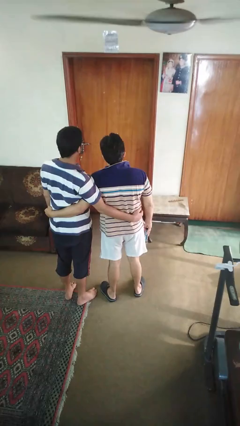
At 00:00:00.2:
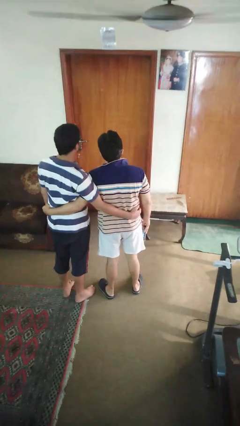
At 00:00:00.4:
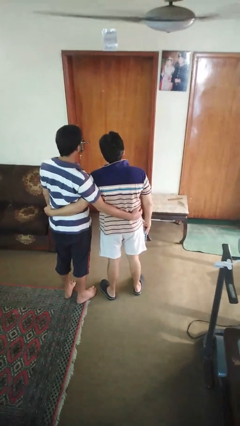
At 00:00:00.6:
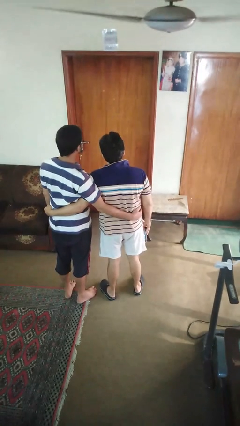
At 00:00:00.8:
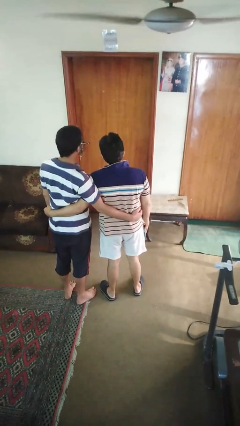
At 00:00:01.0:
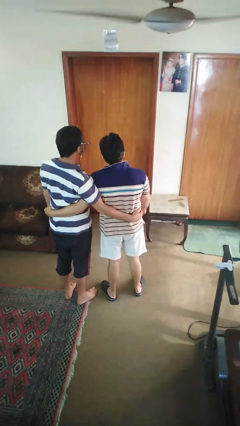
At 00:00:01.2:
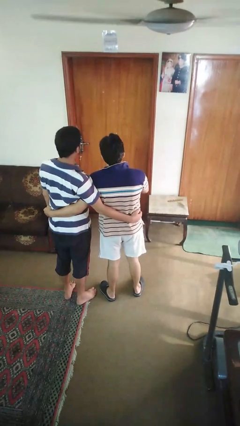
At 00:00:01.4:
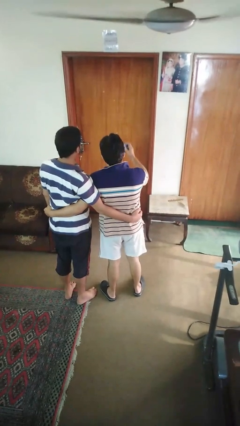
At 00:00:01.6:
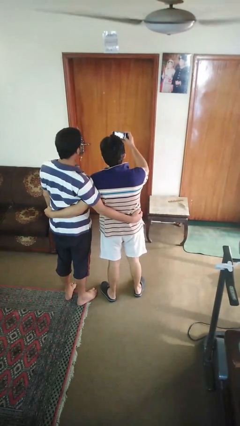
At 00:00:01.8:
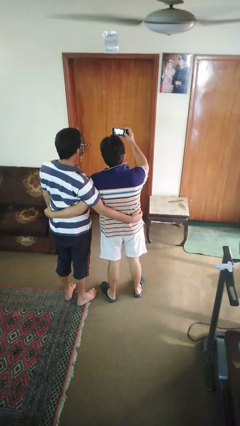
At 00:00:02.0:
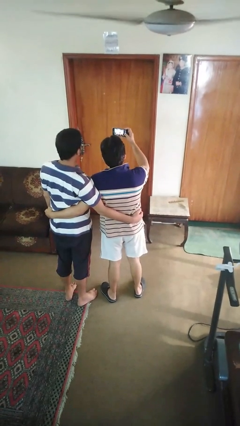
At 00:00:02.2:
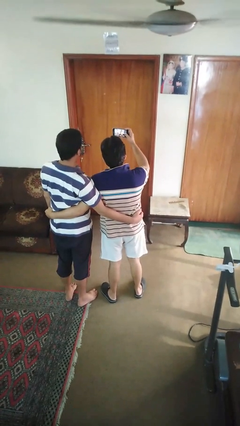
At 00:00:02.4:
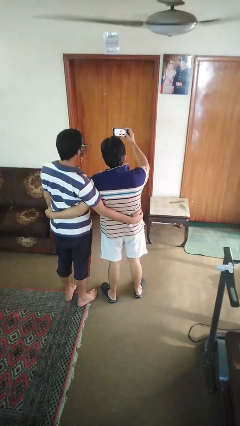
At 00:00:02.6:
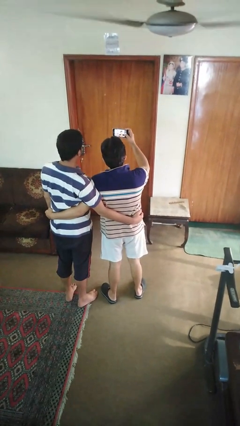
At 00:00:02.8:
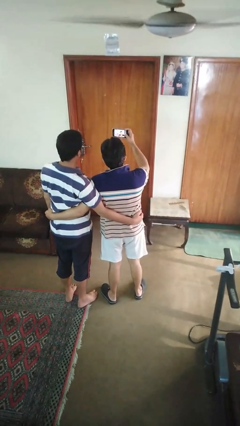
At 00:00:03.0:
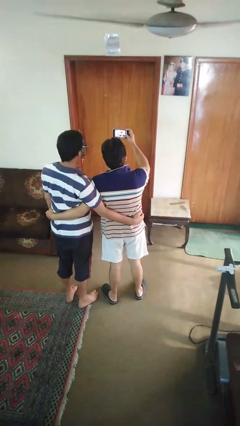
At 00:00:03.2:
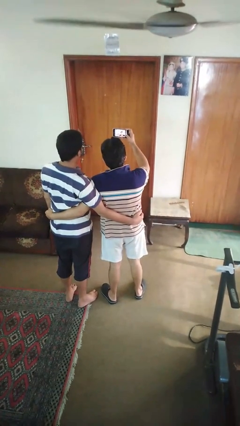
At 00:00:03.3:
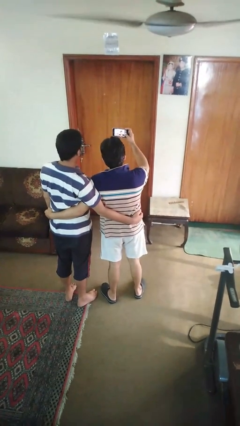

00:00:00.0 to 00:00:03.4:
person takes selfie with person

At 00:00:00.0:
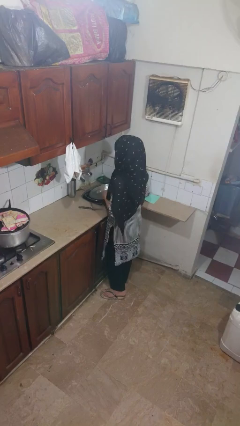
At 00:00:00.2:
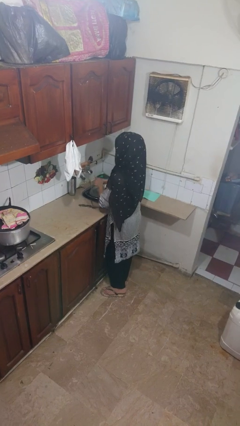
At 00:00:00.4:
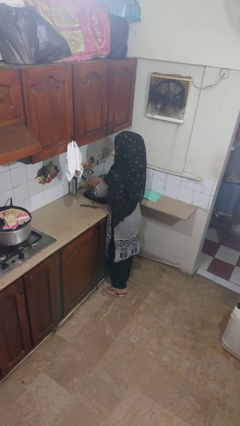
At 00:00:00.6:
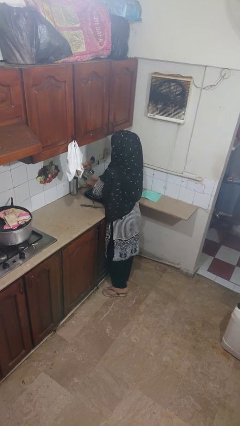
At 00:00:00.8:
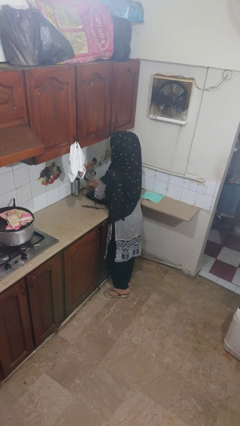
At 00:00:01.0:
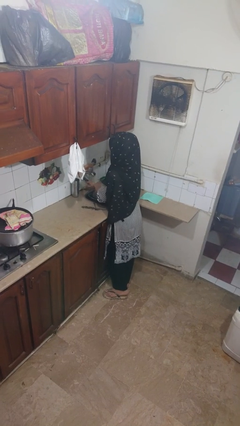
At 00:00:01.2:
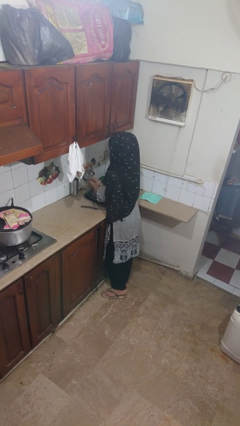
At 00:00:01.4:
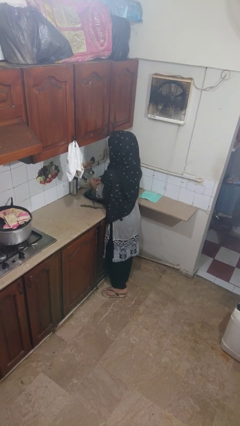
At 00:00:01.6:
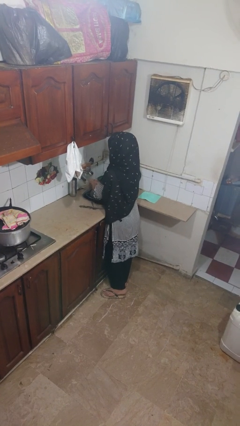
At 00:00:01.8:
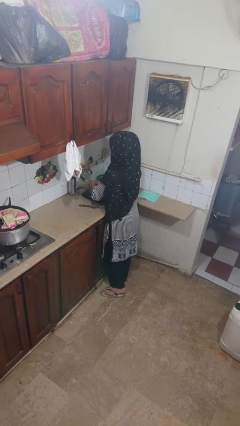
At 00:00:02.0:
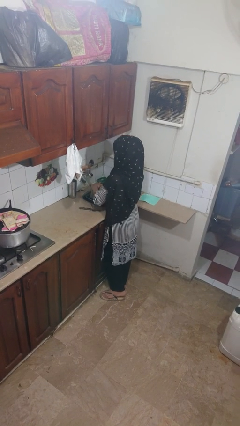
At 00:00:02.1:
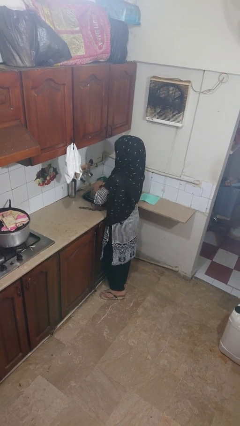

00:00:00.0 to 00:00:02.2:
person washes hands

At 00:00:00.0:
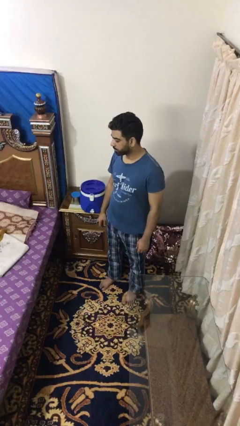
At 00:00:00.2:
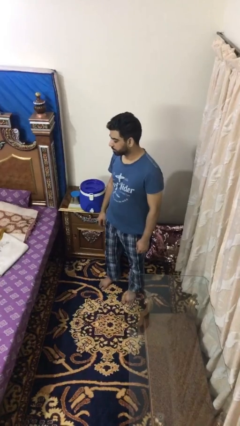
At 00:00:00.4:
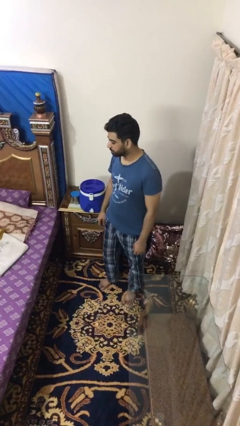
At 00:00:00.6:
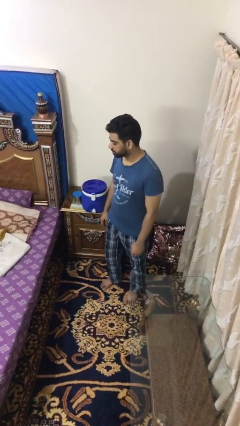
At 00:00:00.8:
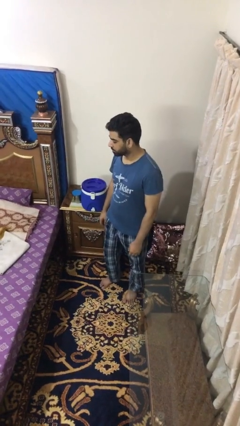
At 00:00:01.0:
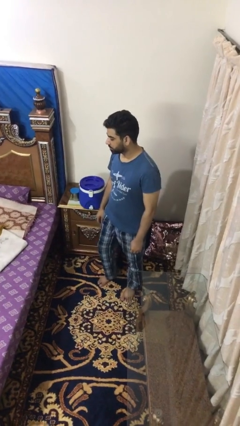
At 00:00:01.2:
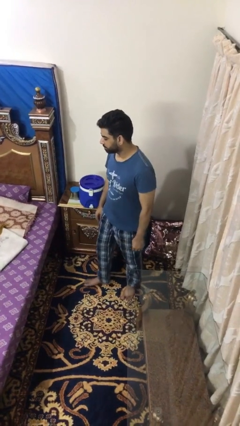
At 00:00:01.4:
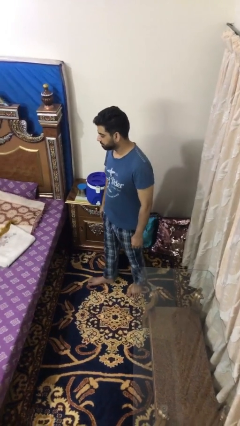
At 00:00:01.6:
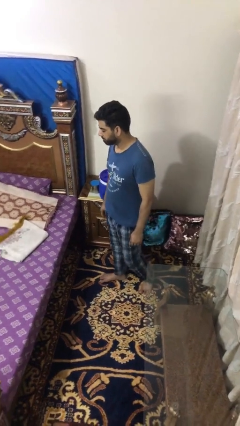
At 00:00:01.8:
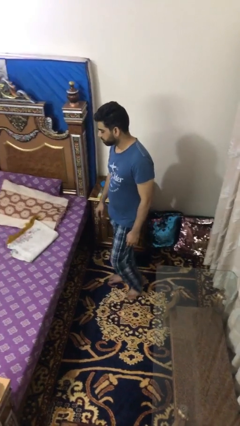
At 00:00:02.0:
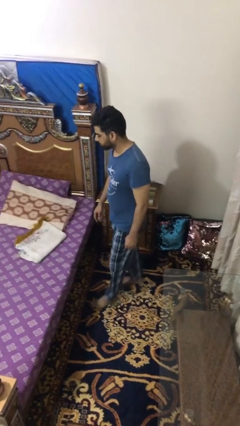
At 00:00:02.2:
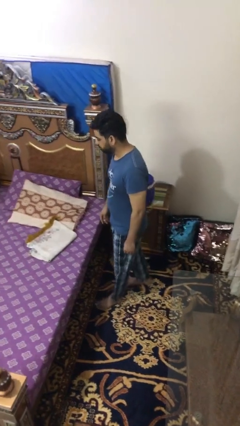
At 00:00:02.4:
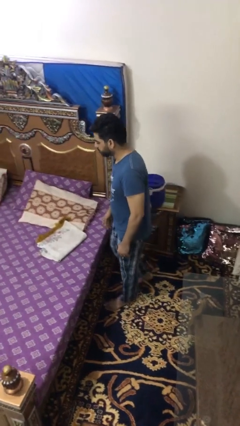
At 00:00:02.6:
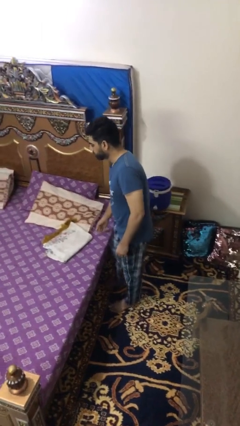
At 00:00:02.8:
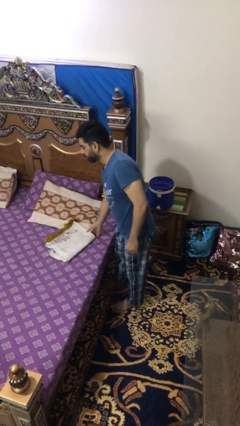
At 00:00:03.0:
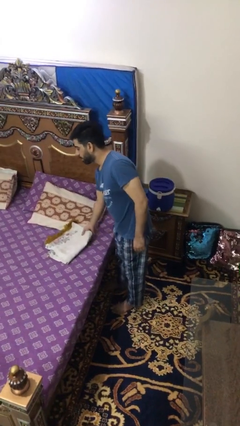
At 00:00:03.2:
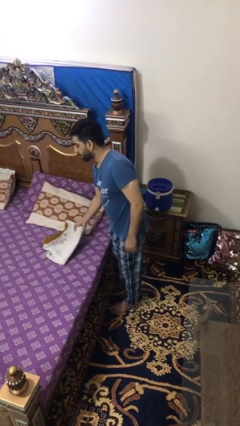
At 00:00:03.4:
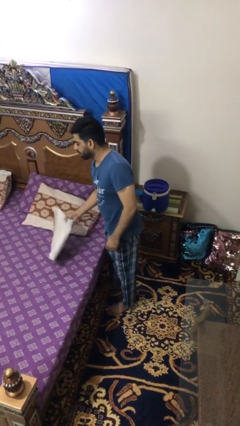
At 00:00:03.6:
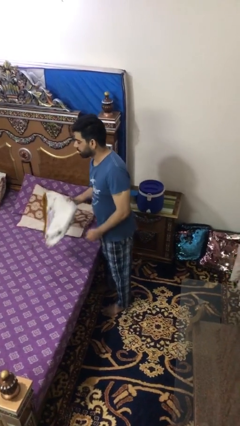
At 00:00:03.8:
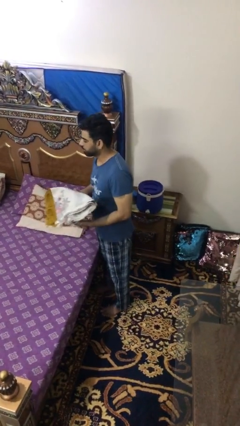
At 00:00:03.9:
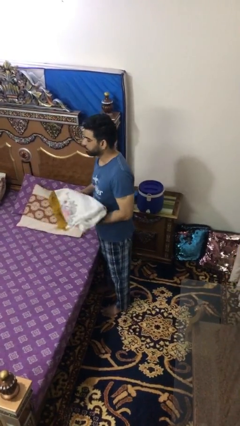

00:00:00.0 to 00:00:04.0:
person picks up object from bed

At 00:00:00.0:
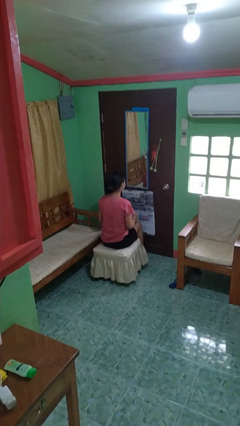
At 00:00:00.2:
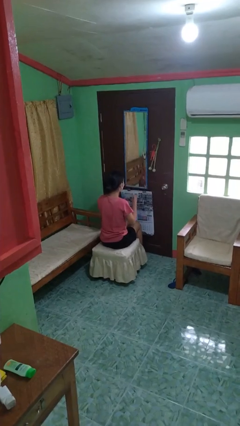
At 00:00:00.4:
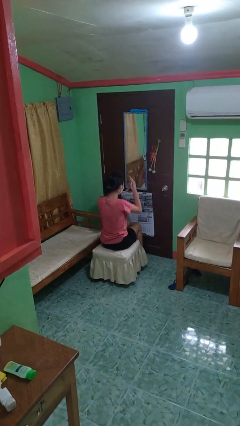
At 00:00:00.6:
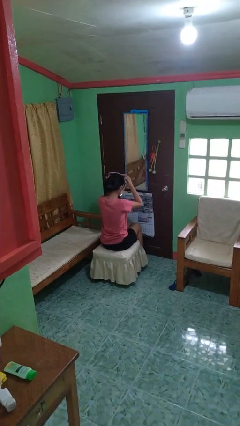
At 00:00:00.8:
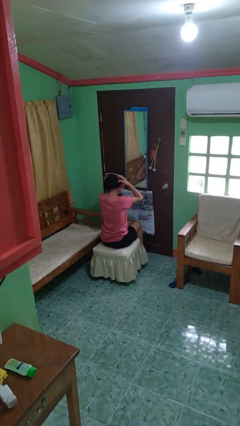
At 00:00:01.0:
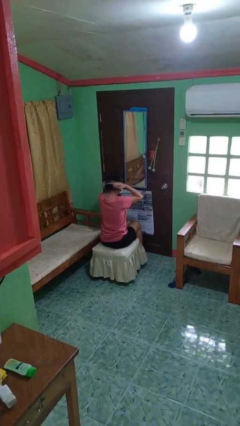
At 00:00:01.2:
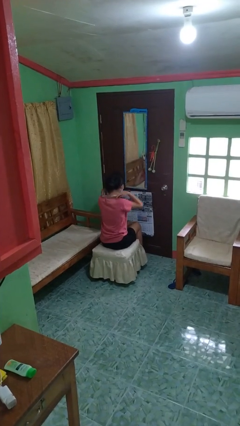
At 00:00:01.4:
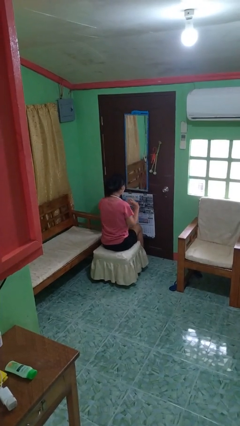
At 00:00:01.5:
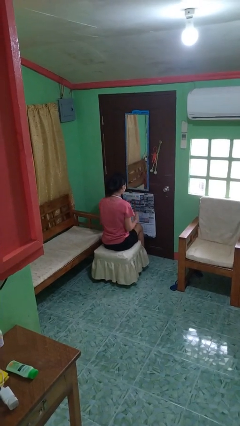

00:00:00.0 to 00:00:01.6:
person puts on necklace

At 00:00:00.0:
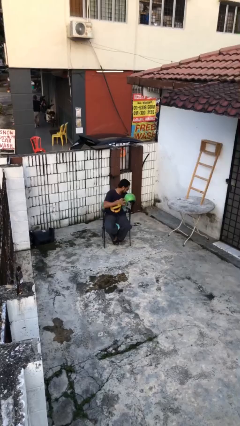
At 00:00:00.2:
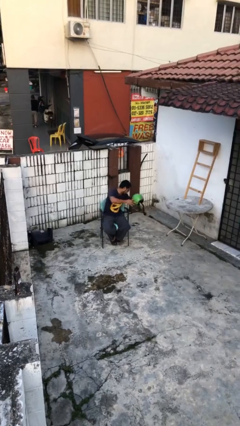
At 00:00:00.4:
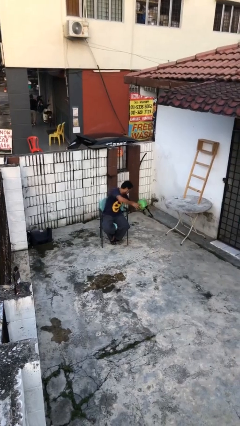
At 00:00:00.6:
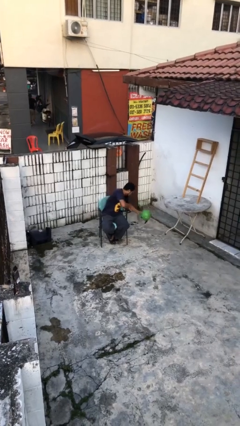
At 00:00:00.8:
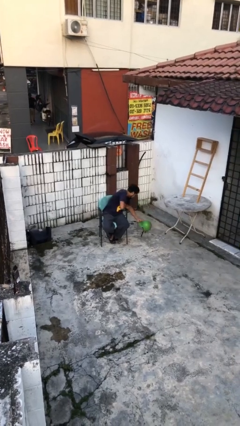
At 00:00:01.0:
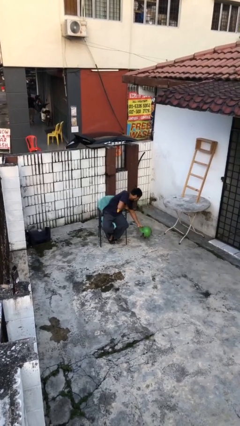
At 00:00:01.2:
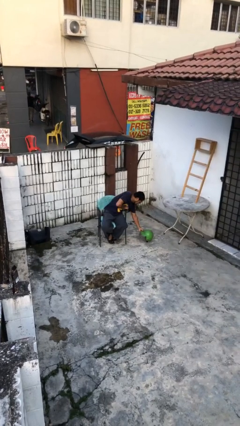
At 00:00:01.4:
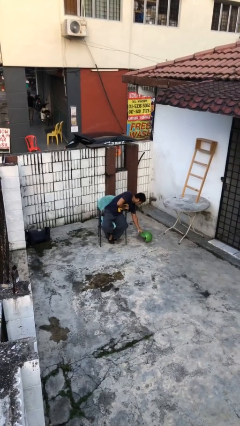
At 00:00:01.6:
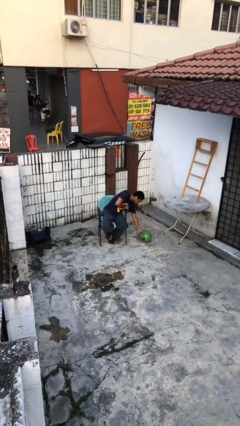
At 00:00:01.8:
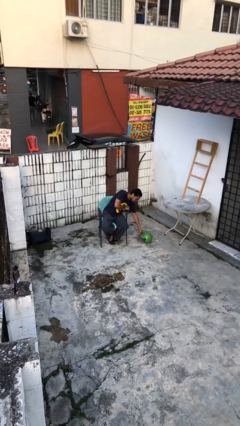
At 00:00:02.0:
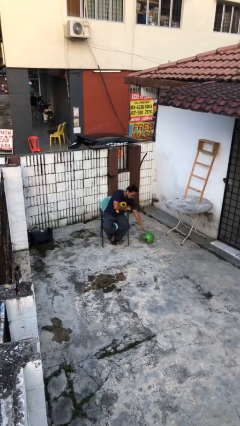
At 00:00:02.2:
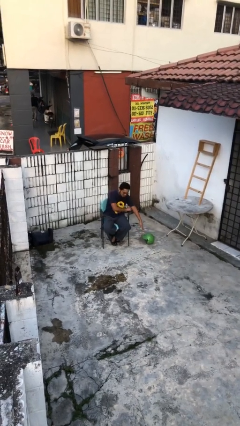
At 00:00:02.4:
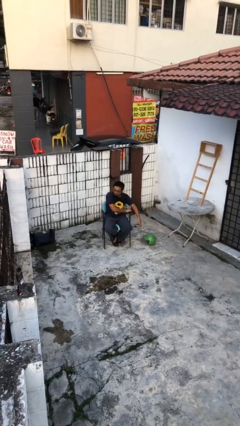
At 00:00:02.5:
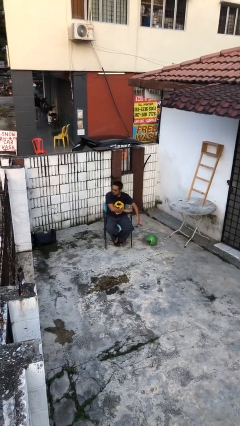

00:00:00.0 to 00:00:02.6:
person puts down object on floor

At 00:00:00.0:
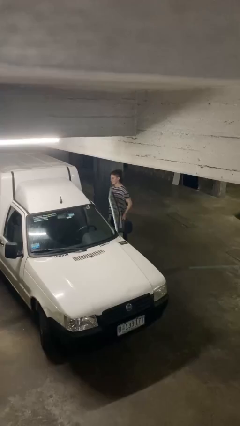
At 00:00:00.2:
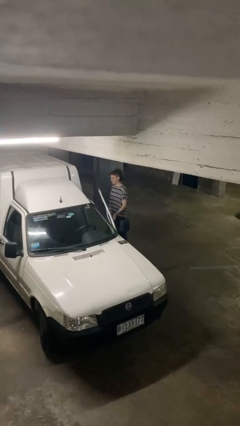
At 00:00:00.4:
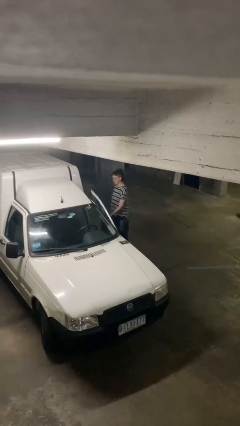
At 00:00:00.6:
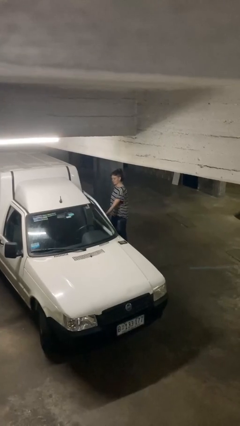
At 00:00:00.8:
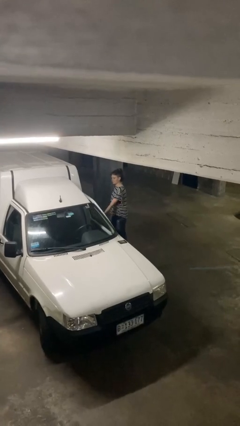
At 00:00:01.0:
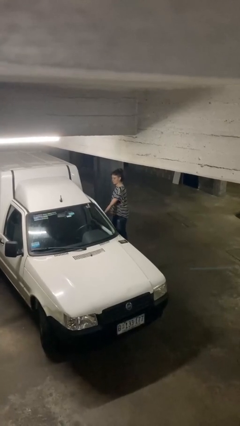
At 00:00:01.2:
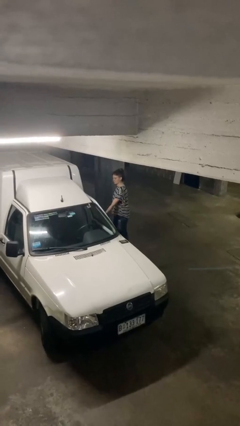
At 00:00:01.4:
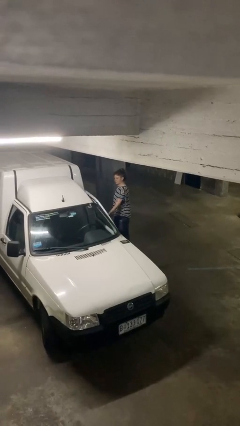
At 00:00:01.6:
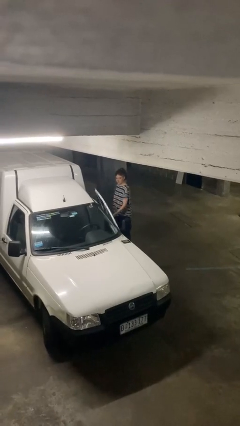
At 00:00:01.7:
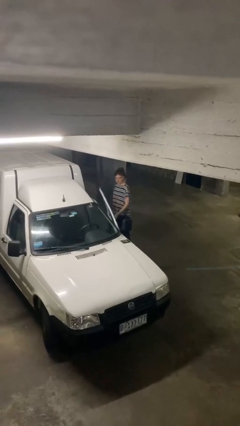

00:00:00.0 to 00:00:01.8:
person closes car door

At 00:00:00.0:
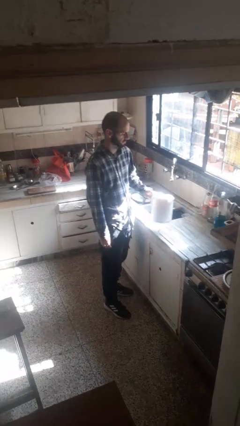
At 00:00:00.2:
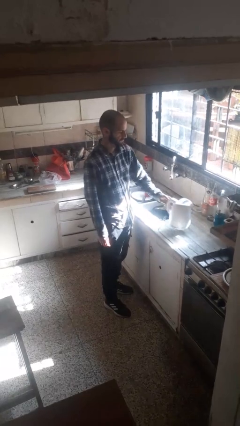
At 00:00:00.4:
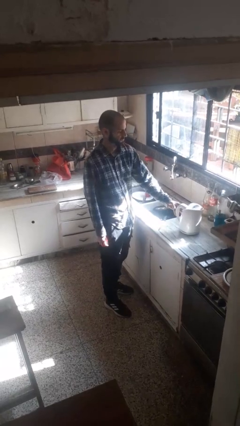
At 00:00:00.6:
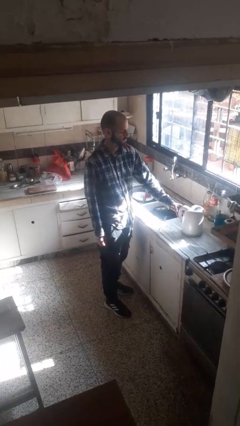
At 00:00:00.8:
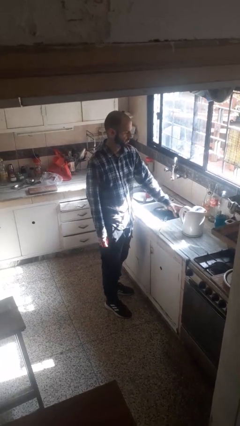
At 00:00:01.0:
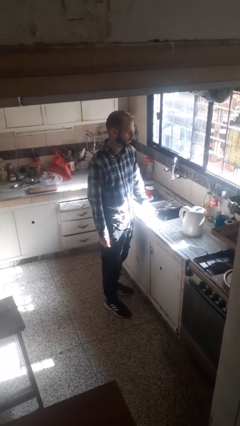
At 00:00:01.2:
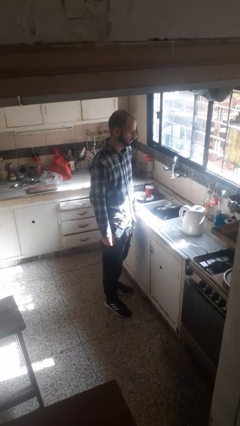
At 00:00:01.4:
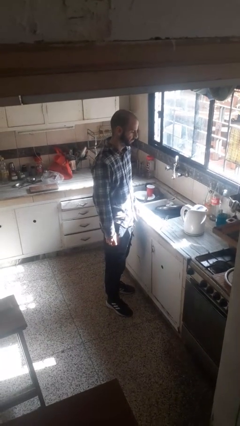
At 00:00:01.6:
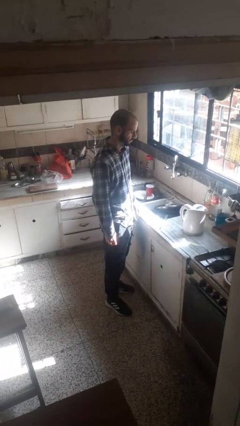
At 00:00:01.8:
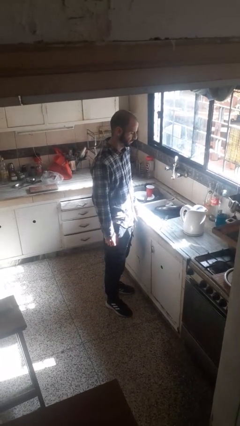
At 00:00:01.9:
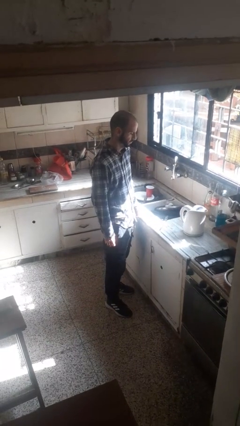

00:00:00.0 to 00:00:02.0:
person puts down object on countertop
